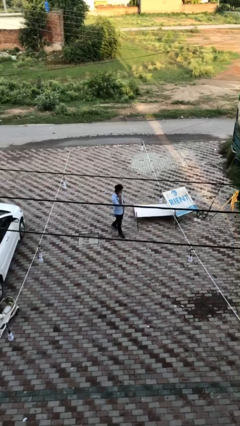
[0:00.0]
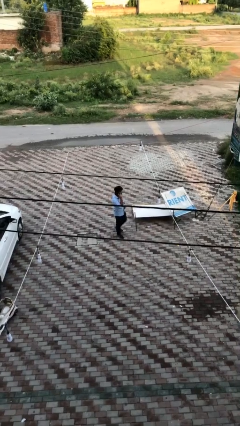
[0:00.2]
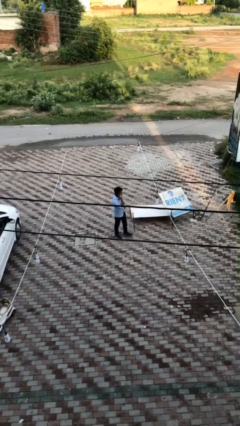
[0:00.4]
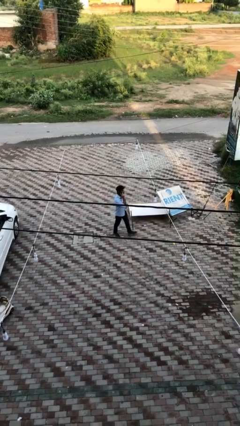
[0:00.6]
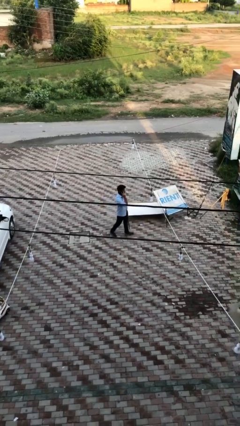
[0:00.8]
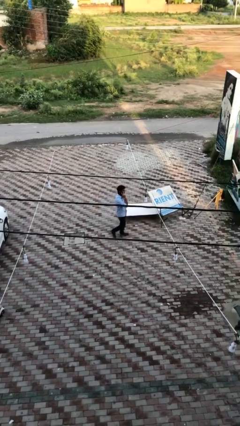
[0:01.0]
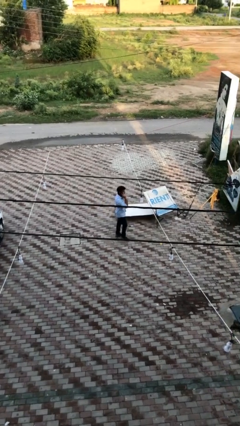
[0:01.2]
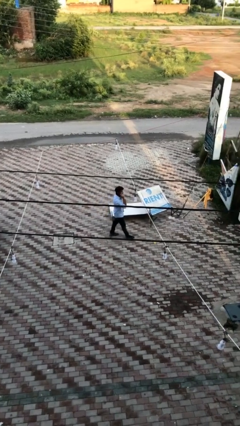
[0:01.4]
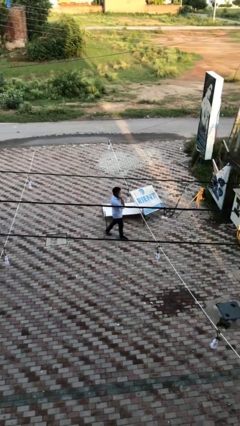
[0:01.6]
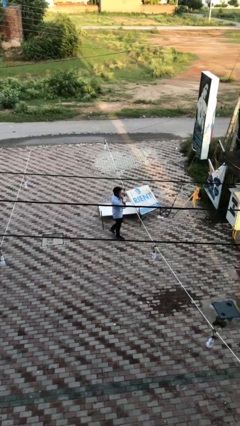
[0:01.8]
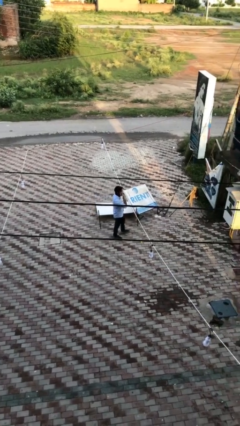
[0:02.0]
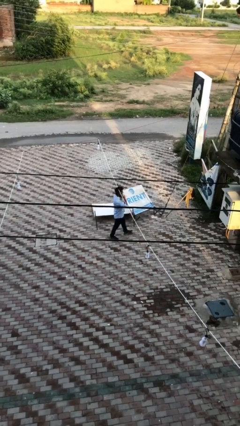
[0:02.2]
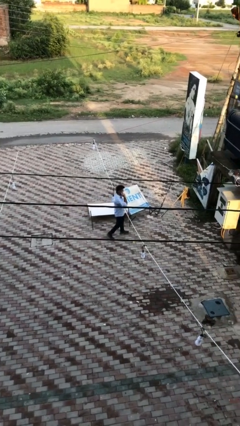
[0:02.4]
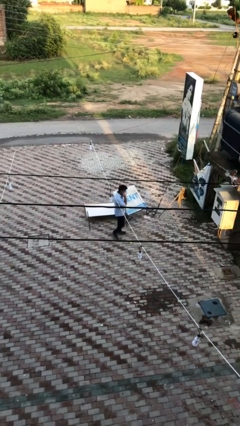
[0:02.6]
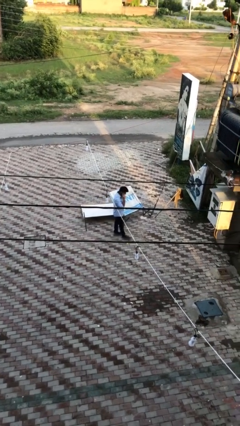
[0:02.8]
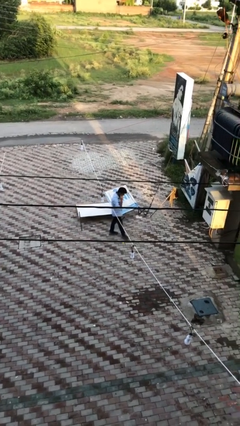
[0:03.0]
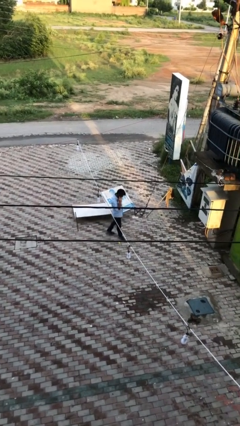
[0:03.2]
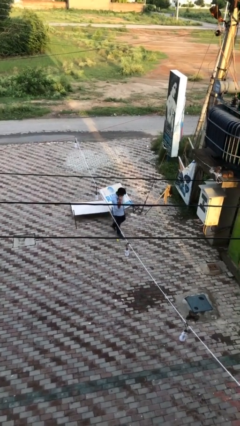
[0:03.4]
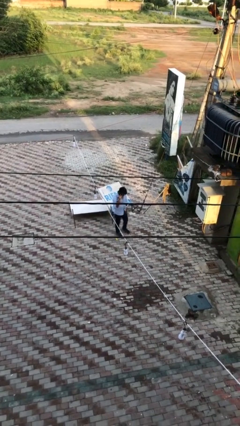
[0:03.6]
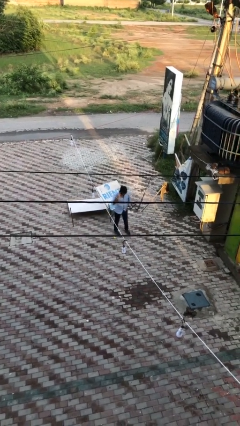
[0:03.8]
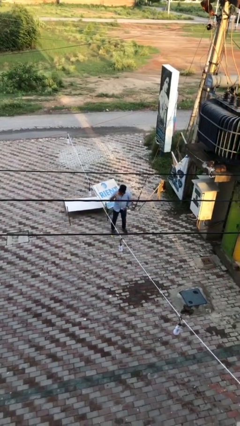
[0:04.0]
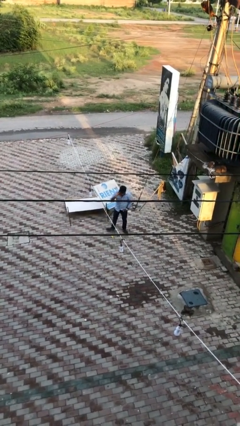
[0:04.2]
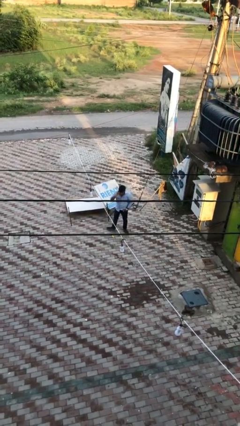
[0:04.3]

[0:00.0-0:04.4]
person talks on phone

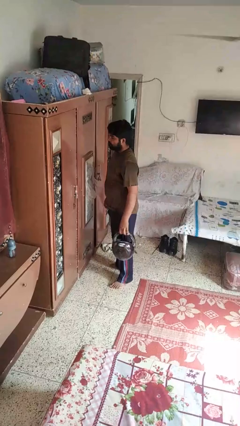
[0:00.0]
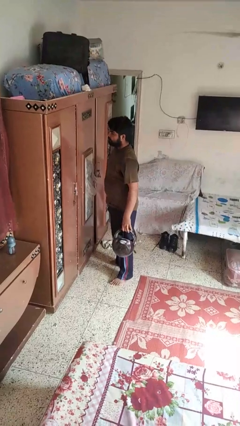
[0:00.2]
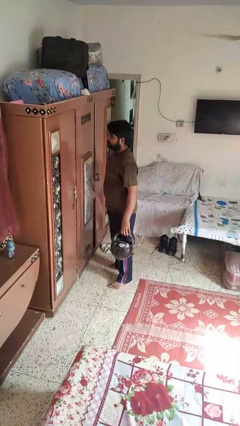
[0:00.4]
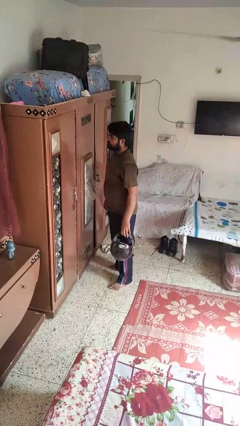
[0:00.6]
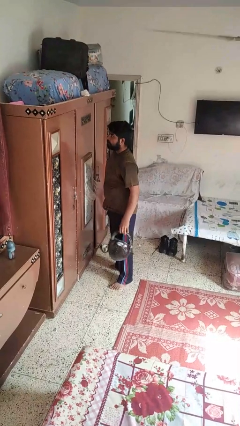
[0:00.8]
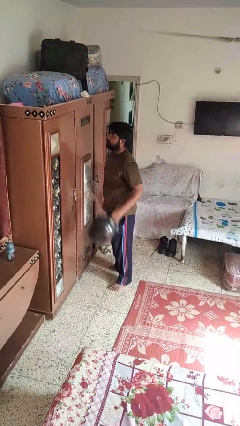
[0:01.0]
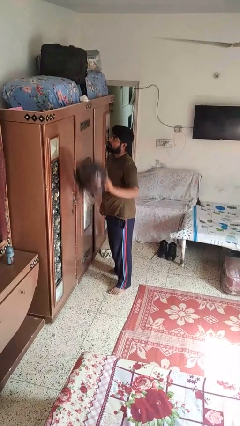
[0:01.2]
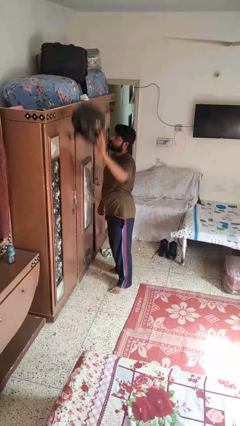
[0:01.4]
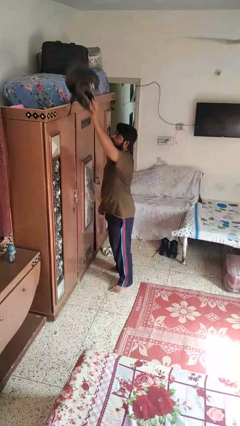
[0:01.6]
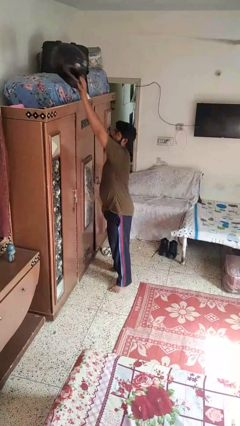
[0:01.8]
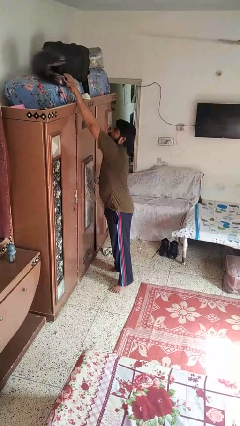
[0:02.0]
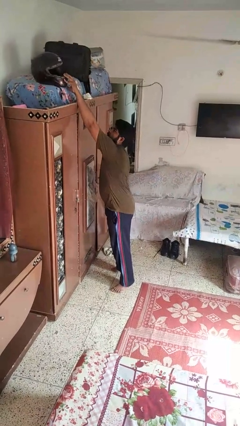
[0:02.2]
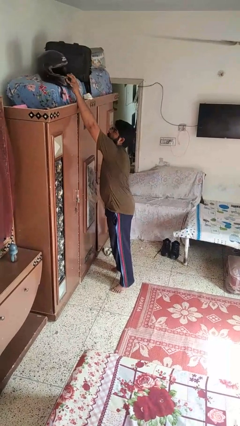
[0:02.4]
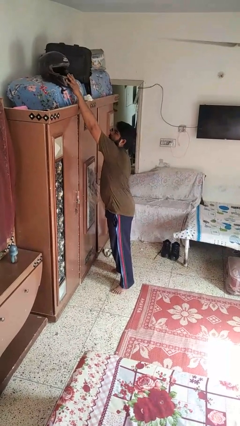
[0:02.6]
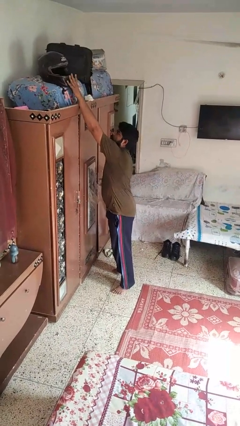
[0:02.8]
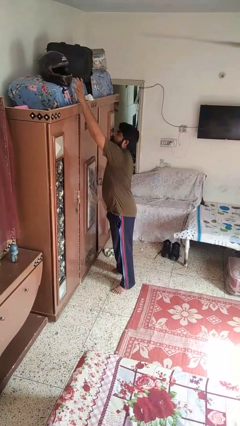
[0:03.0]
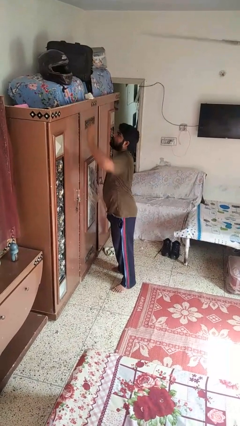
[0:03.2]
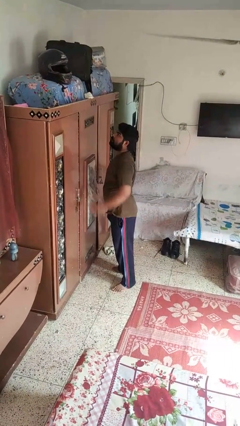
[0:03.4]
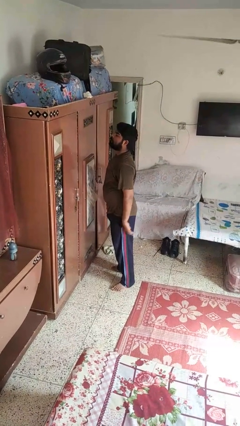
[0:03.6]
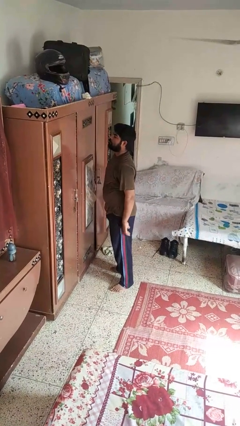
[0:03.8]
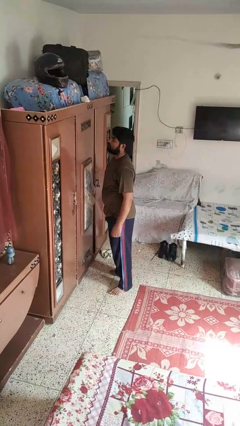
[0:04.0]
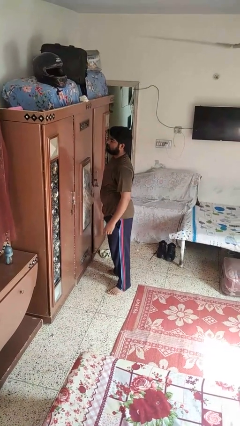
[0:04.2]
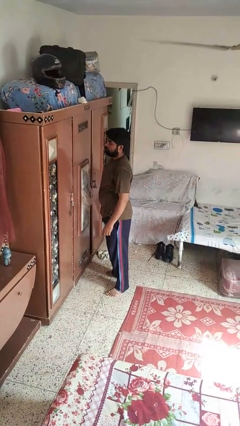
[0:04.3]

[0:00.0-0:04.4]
person puts down object on shelf

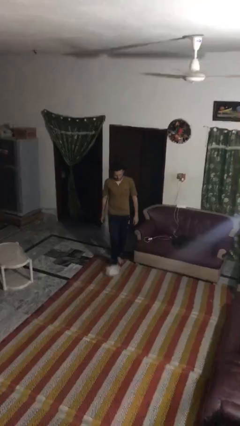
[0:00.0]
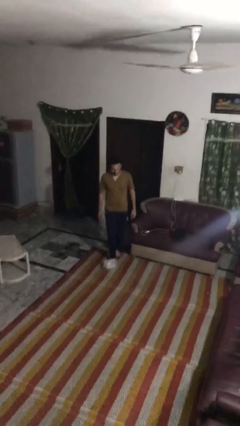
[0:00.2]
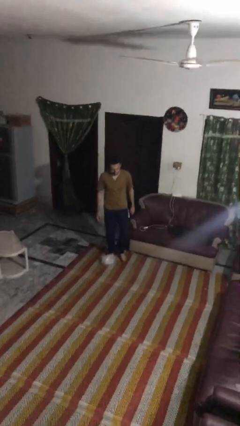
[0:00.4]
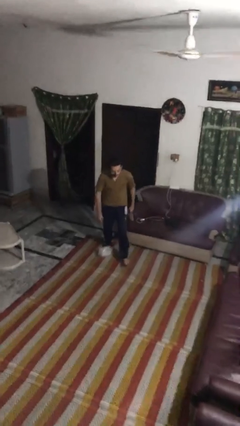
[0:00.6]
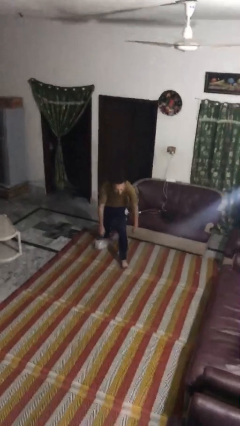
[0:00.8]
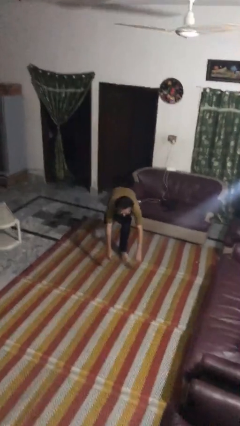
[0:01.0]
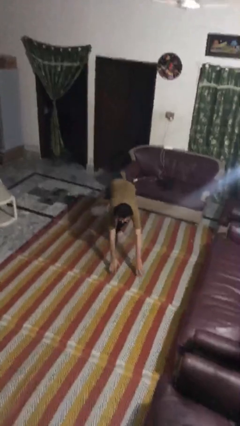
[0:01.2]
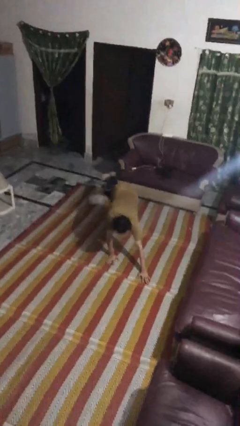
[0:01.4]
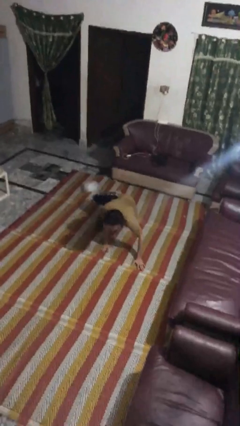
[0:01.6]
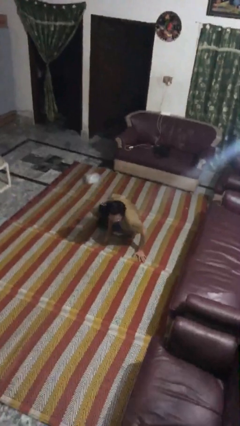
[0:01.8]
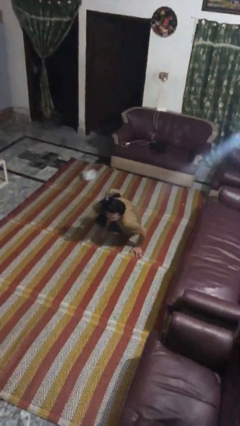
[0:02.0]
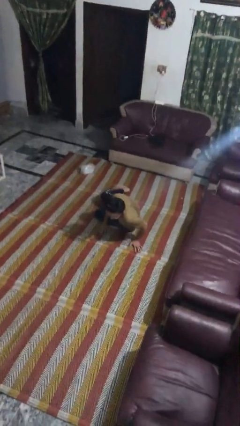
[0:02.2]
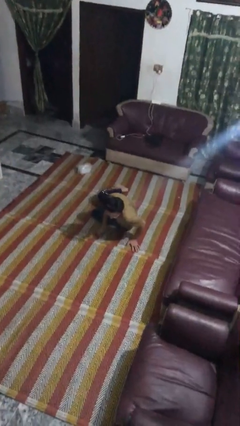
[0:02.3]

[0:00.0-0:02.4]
person trips on object on floor

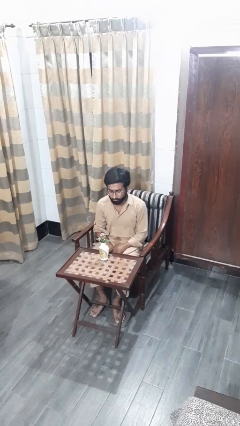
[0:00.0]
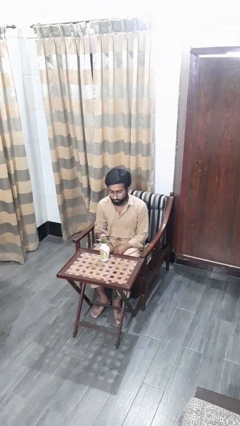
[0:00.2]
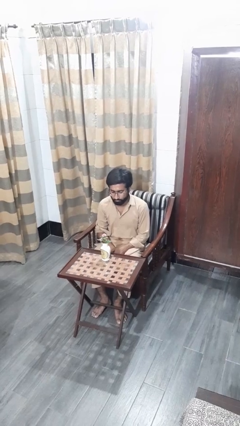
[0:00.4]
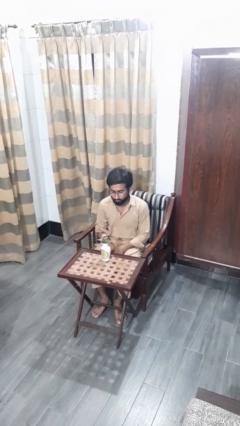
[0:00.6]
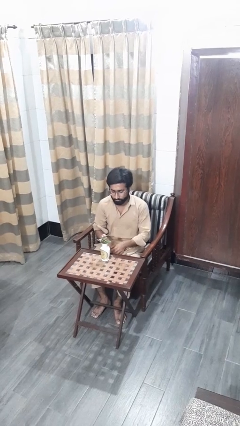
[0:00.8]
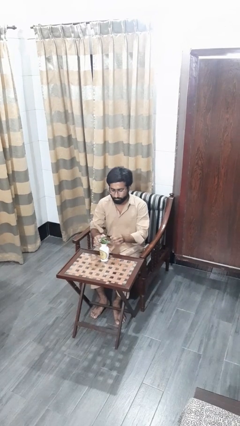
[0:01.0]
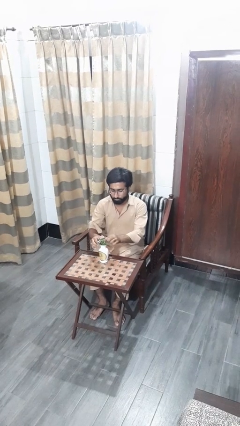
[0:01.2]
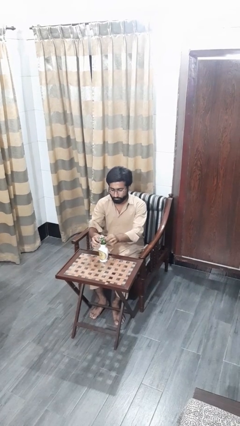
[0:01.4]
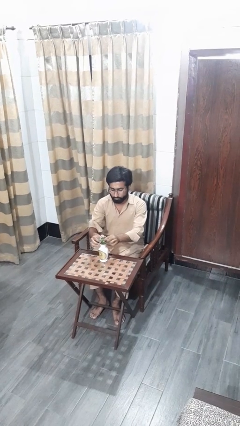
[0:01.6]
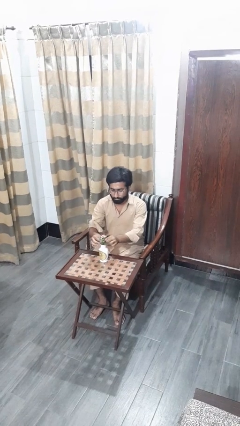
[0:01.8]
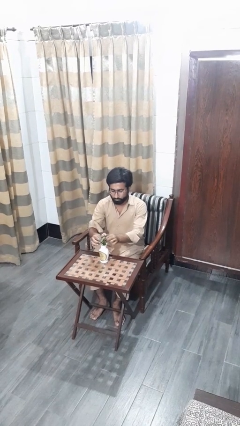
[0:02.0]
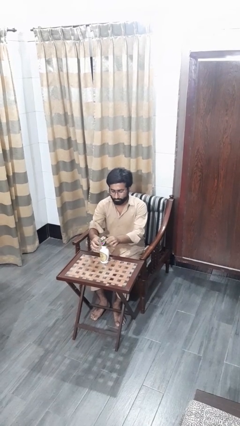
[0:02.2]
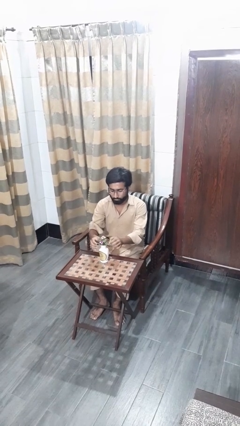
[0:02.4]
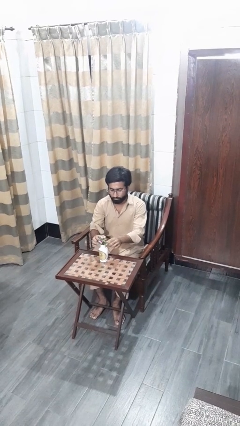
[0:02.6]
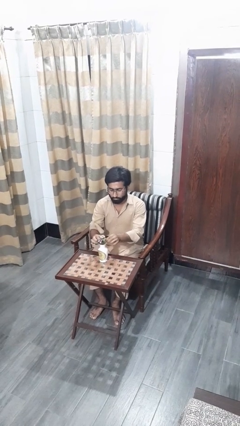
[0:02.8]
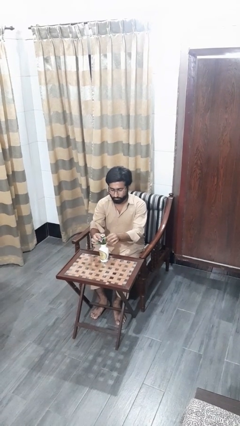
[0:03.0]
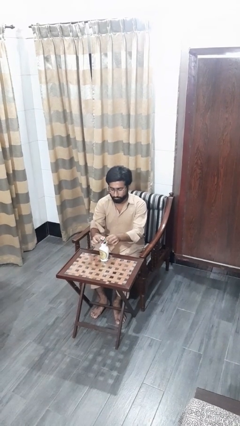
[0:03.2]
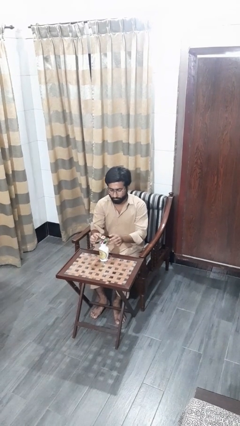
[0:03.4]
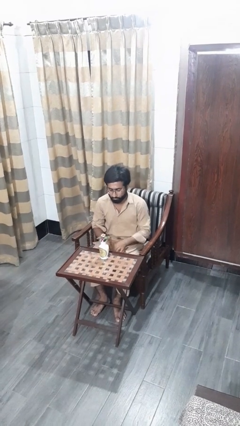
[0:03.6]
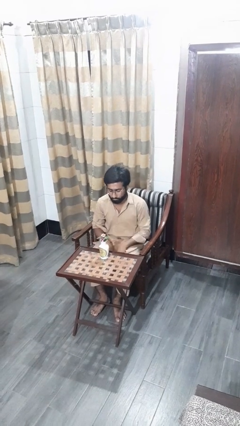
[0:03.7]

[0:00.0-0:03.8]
person arranges flowers in vase

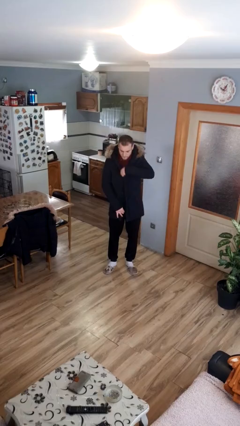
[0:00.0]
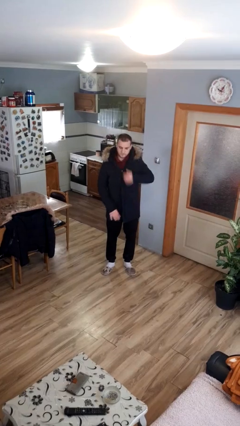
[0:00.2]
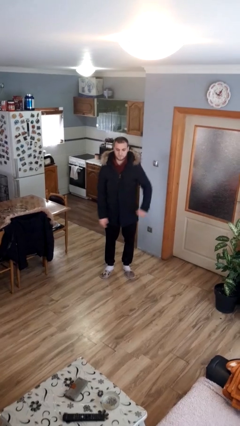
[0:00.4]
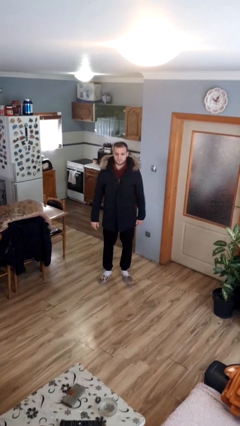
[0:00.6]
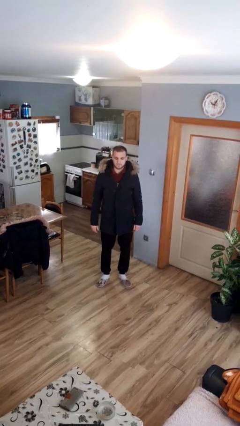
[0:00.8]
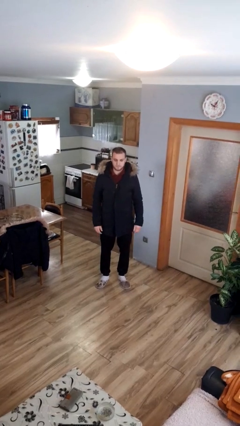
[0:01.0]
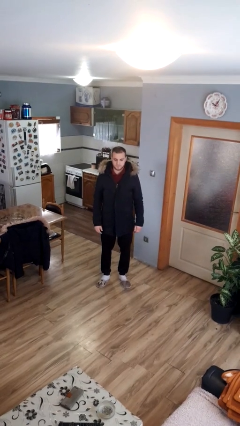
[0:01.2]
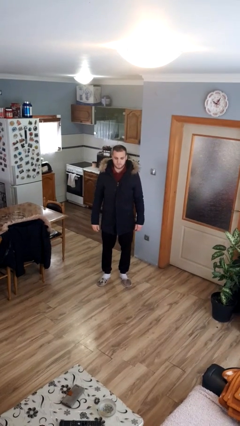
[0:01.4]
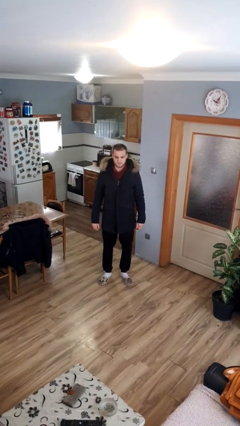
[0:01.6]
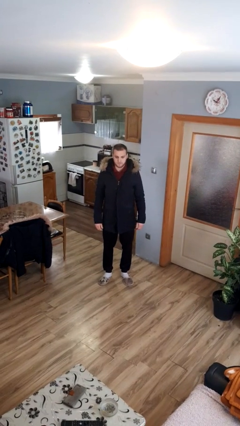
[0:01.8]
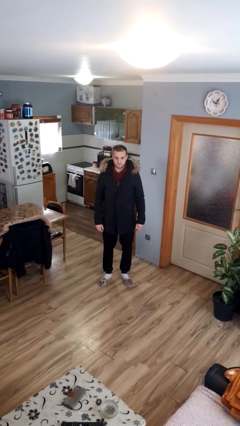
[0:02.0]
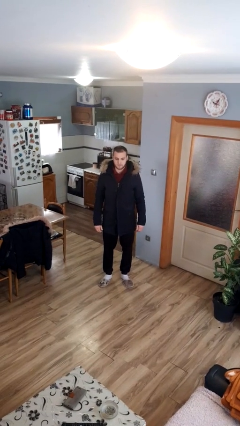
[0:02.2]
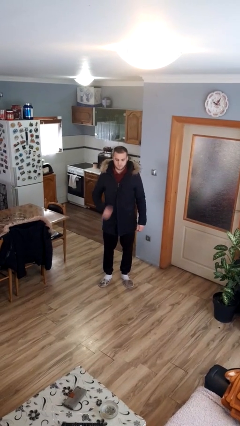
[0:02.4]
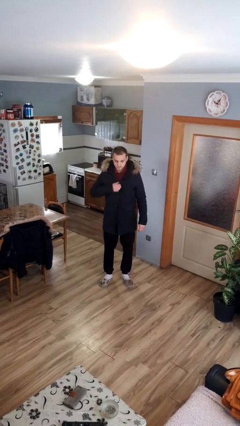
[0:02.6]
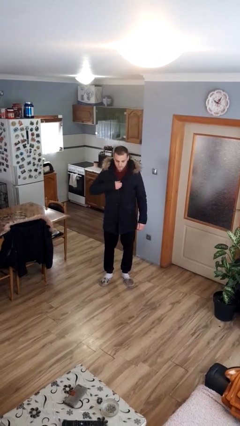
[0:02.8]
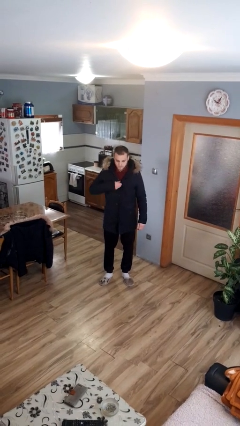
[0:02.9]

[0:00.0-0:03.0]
person zips up jacket
